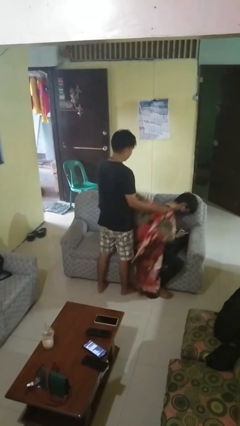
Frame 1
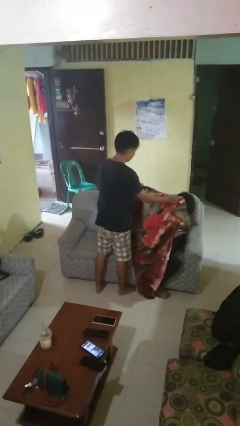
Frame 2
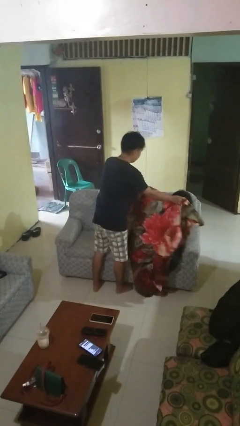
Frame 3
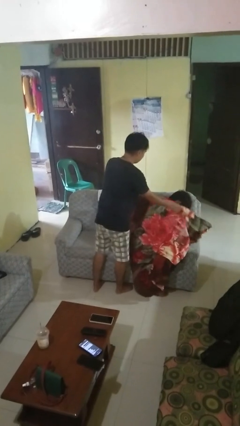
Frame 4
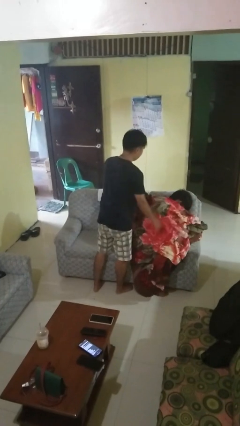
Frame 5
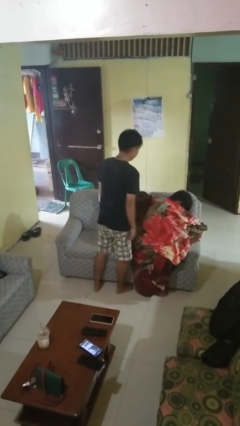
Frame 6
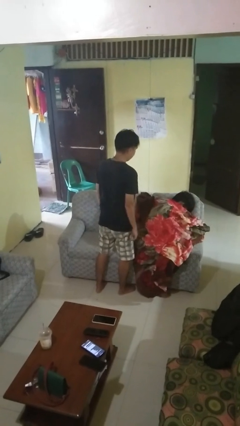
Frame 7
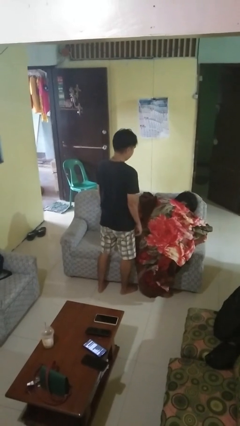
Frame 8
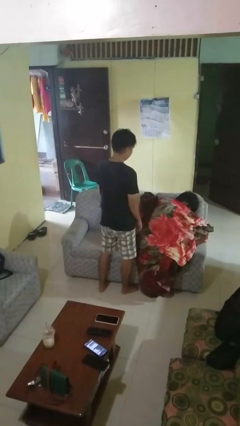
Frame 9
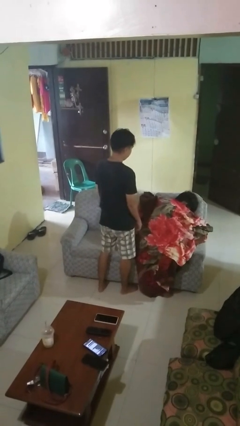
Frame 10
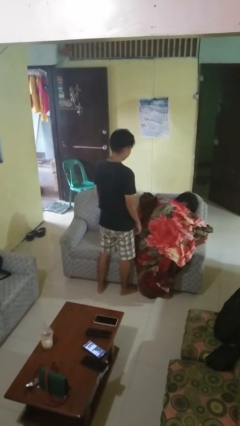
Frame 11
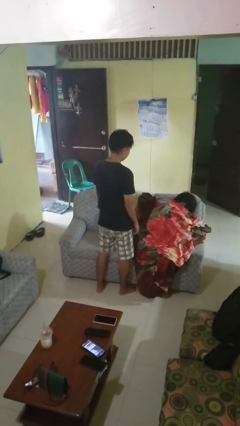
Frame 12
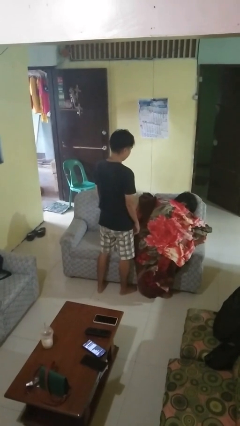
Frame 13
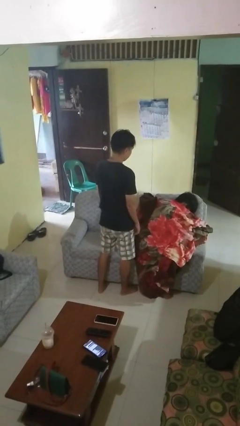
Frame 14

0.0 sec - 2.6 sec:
person covers friend with blanket

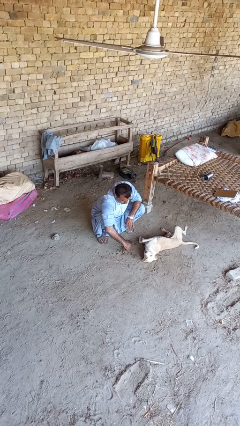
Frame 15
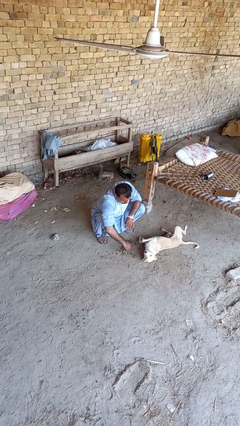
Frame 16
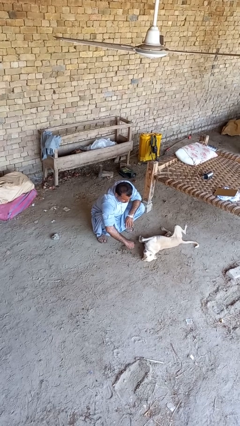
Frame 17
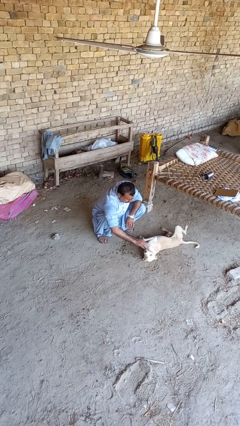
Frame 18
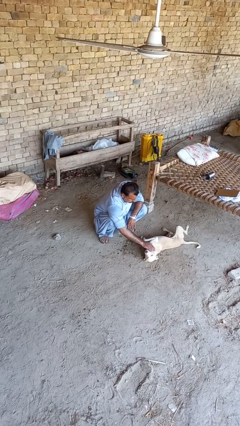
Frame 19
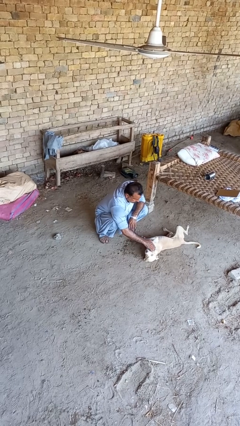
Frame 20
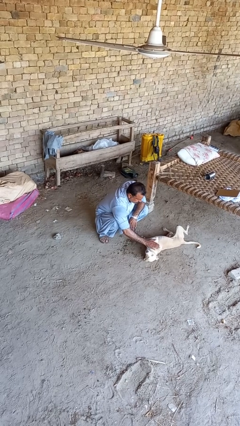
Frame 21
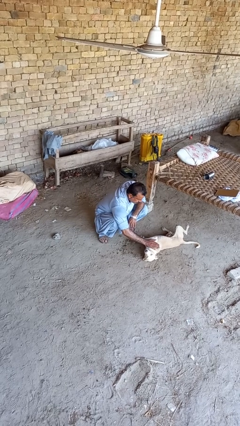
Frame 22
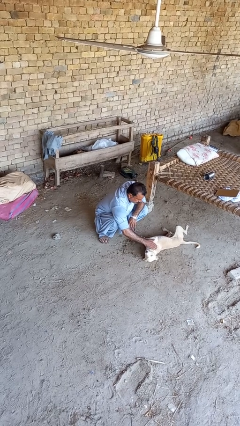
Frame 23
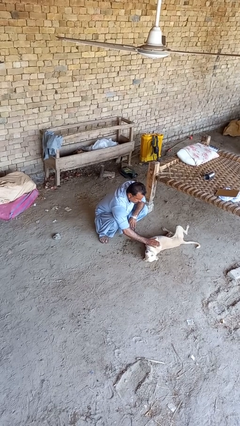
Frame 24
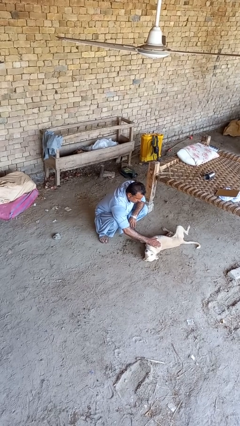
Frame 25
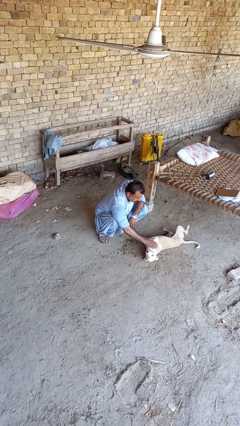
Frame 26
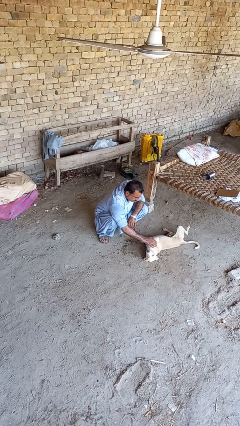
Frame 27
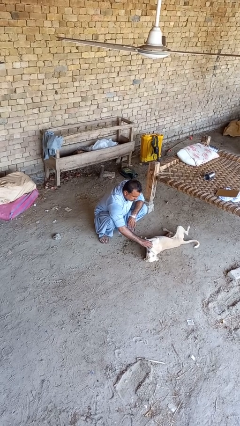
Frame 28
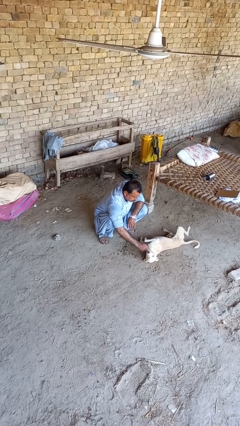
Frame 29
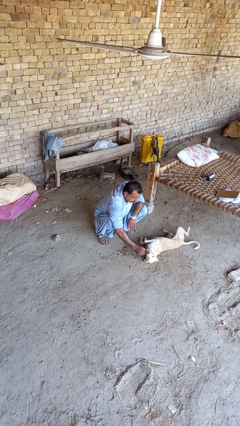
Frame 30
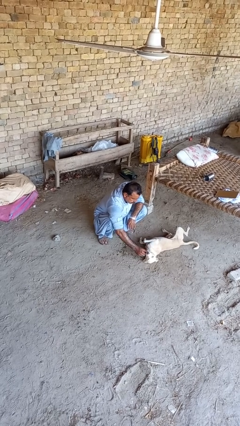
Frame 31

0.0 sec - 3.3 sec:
person pets dog

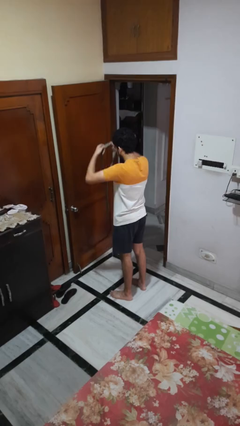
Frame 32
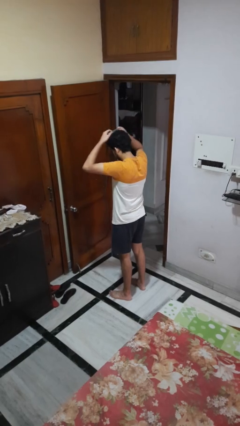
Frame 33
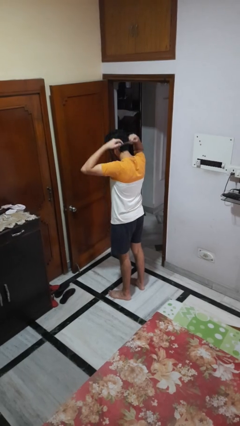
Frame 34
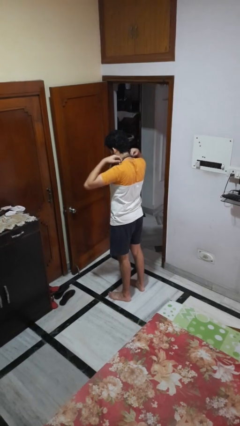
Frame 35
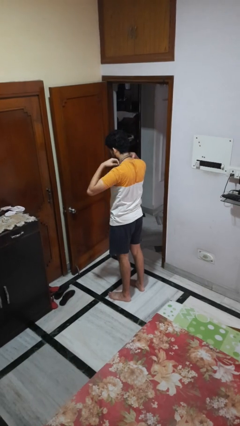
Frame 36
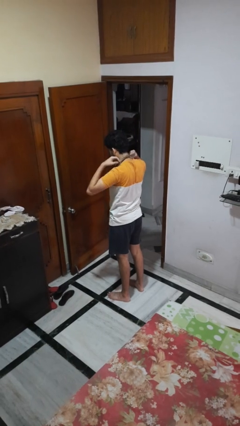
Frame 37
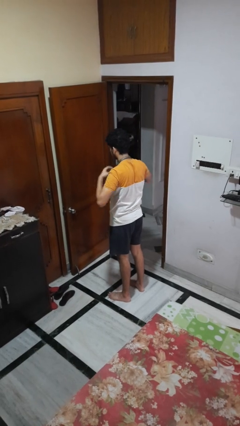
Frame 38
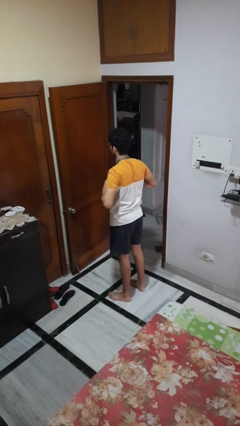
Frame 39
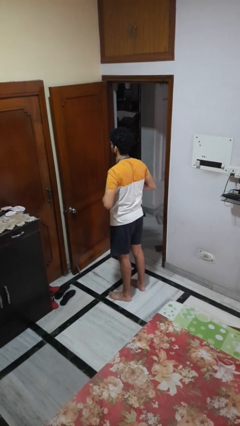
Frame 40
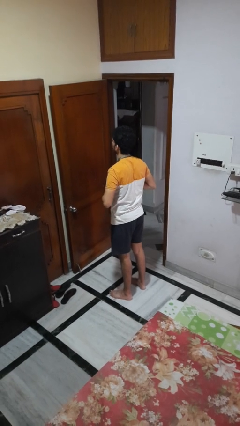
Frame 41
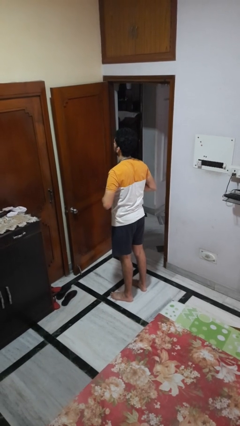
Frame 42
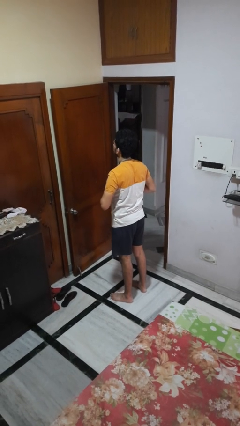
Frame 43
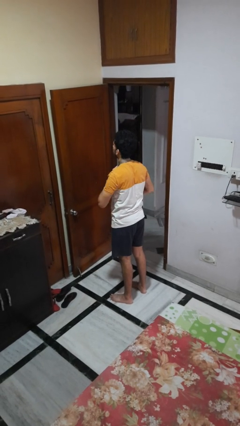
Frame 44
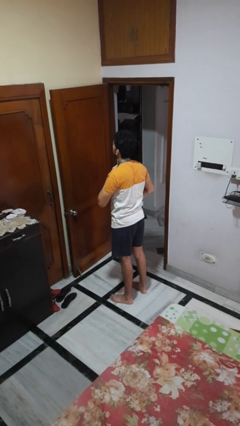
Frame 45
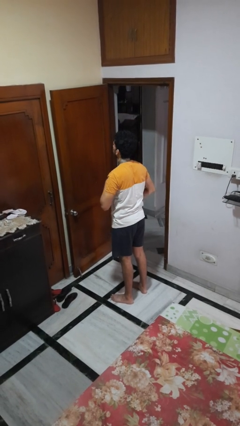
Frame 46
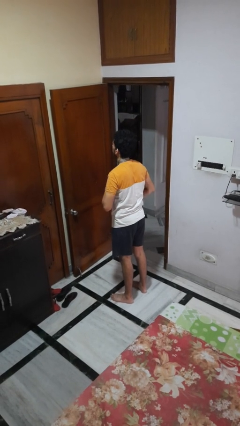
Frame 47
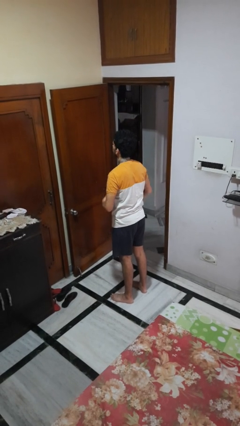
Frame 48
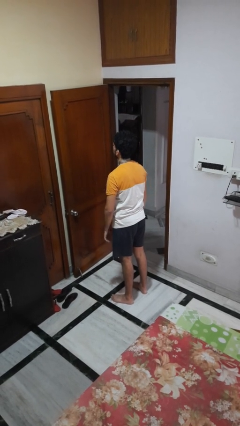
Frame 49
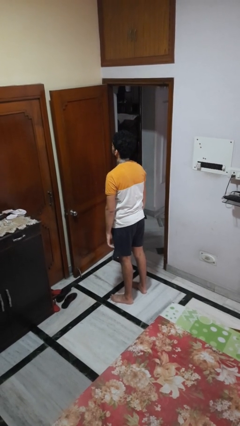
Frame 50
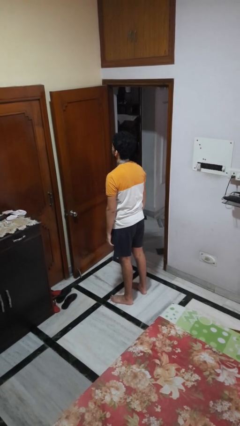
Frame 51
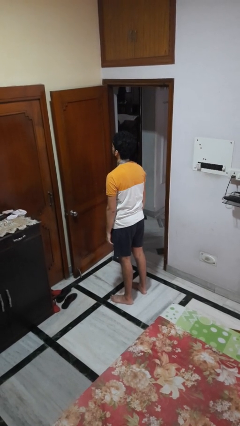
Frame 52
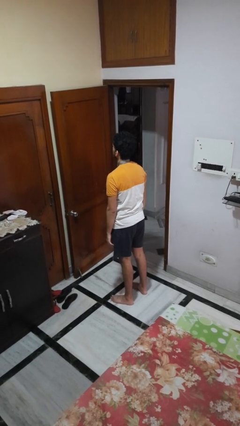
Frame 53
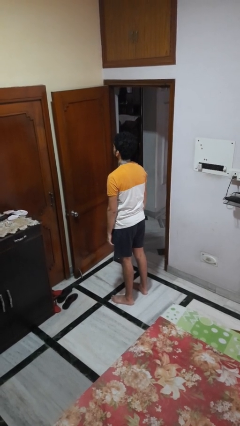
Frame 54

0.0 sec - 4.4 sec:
person puts on necktie

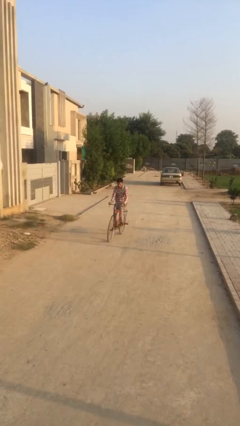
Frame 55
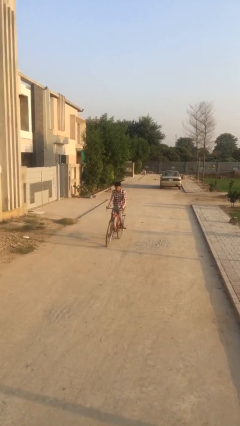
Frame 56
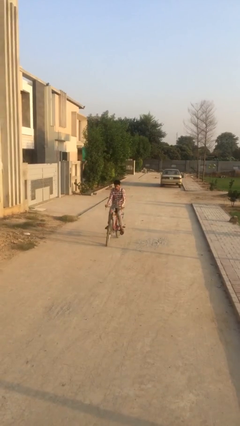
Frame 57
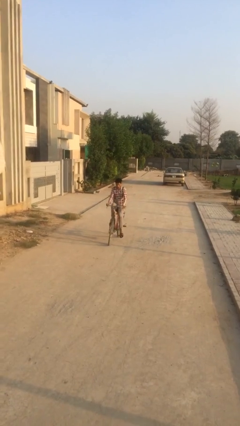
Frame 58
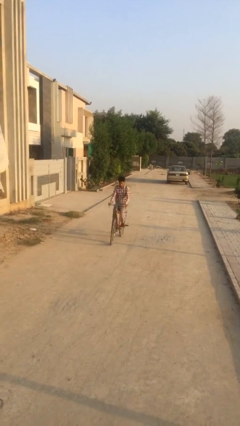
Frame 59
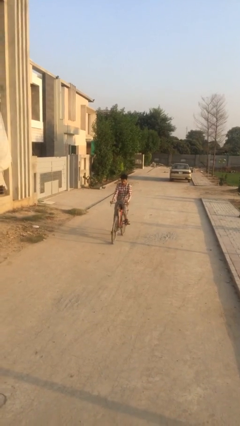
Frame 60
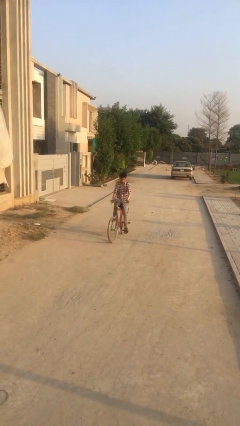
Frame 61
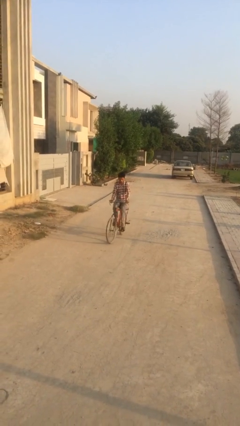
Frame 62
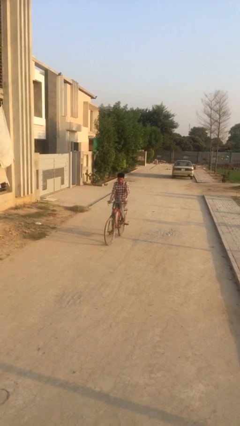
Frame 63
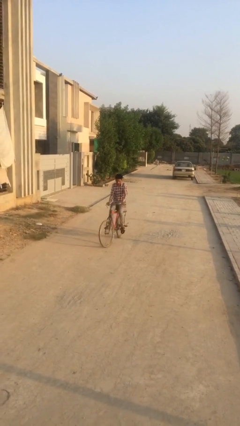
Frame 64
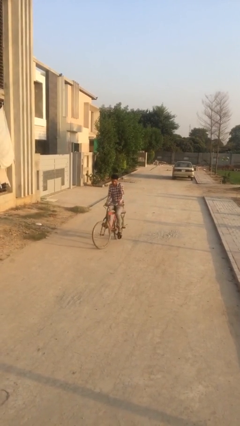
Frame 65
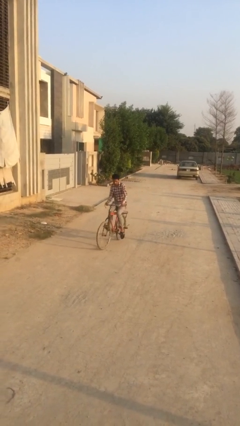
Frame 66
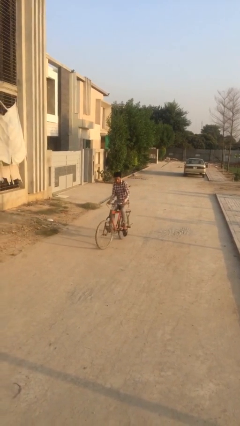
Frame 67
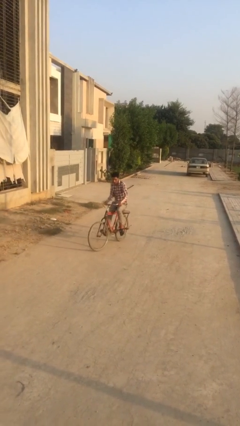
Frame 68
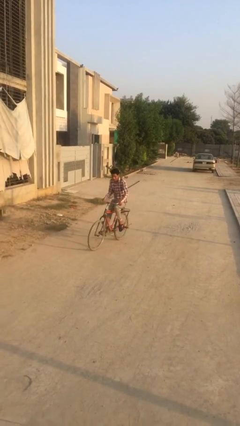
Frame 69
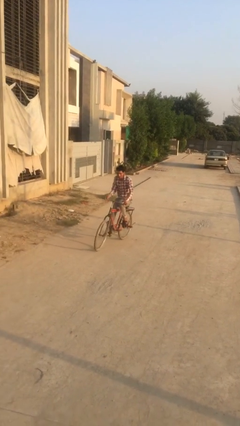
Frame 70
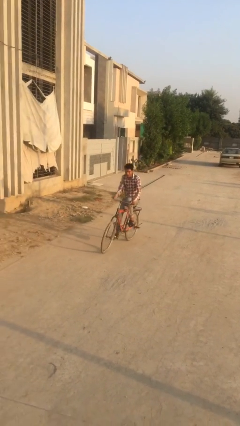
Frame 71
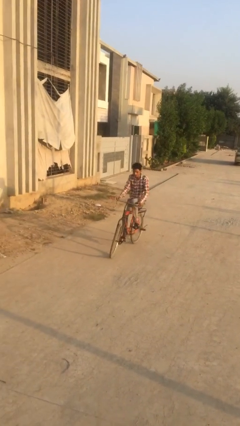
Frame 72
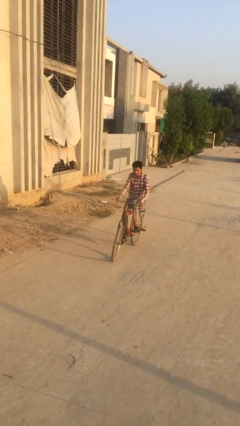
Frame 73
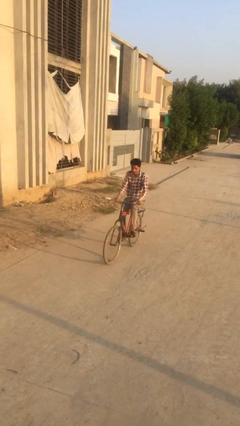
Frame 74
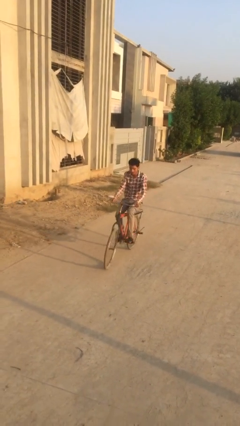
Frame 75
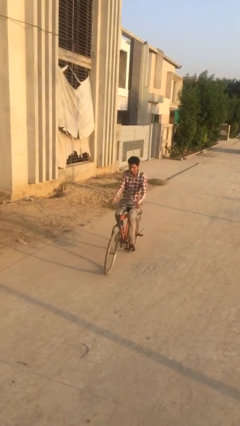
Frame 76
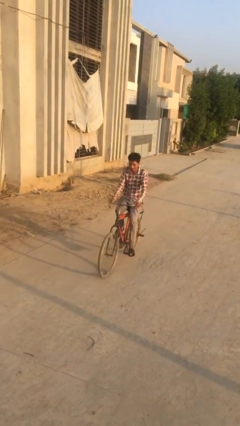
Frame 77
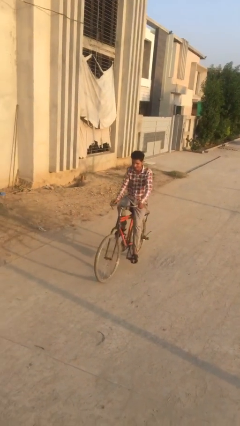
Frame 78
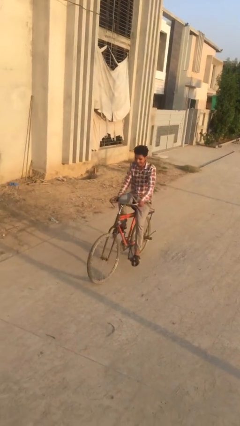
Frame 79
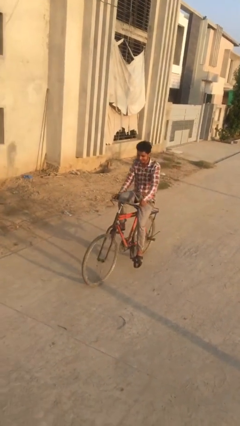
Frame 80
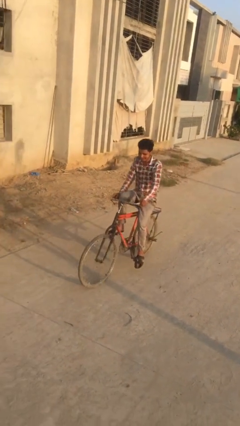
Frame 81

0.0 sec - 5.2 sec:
person rides bicycle

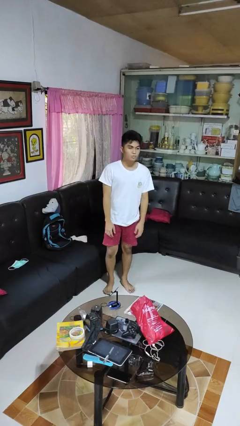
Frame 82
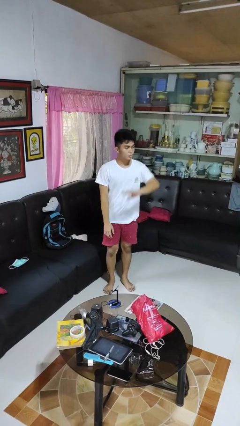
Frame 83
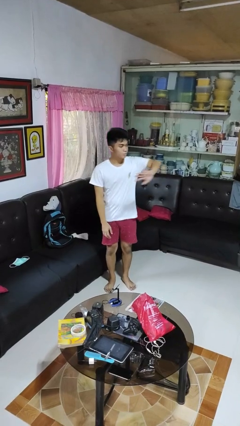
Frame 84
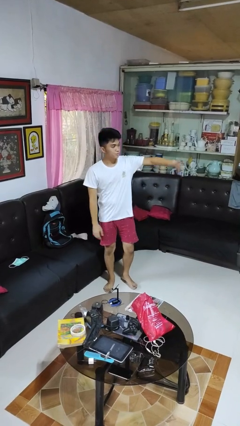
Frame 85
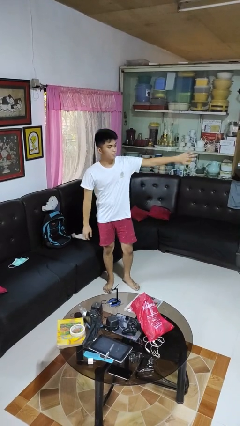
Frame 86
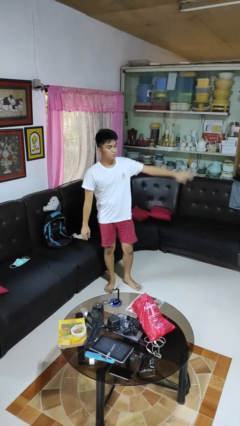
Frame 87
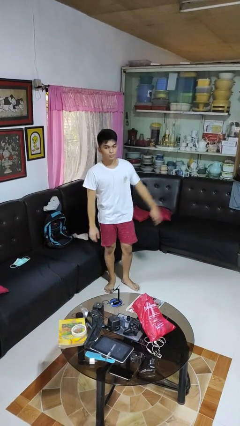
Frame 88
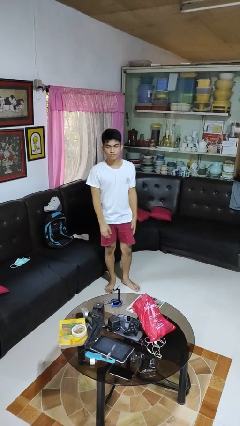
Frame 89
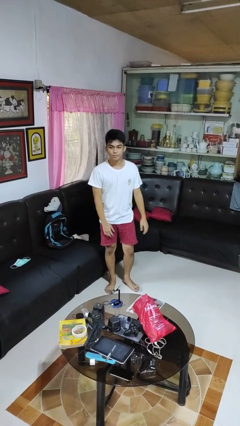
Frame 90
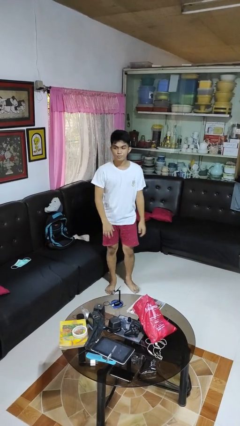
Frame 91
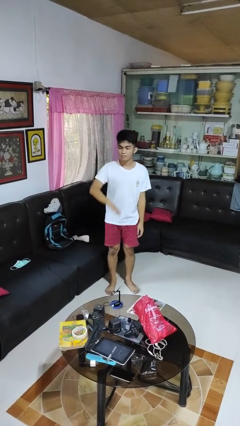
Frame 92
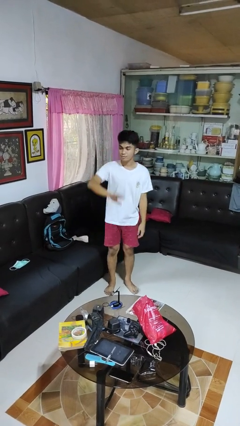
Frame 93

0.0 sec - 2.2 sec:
person gestures swipe left
